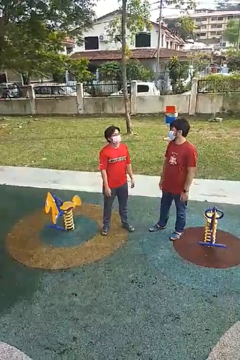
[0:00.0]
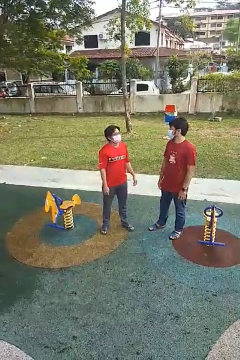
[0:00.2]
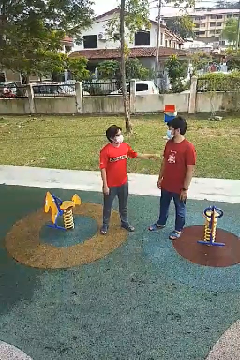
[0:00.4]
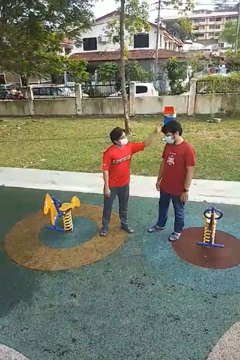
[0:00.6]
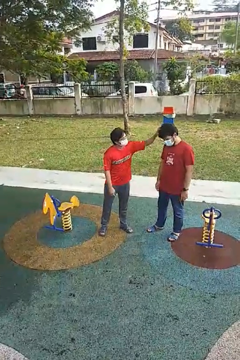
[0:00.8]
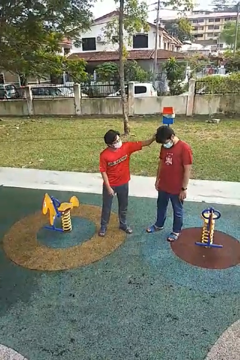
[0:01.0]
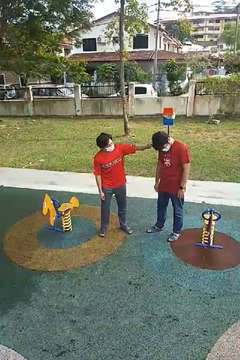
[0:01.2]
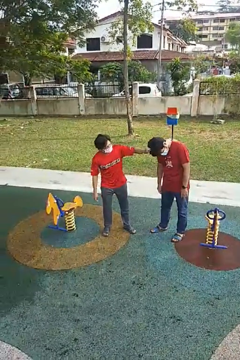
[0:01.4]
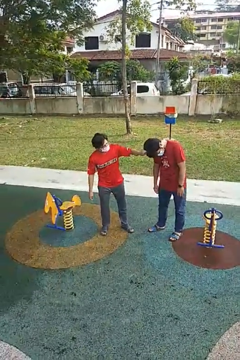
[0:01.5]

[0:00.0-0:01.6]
person grabs person by hair

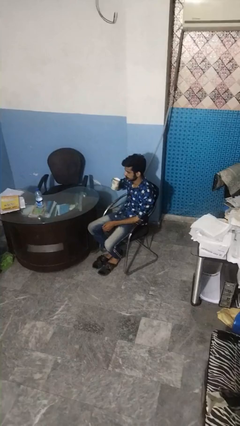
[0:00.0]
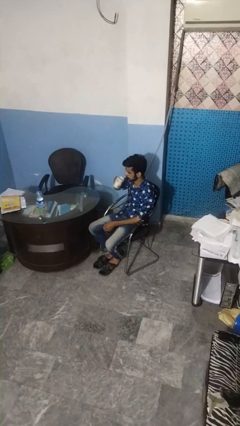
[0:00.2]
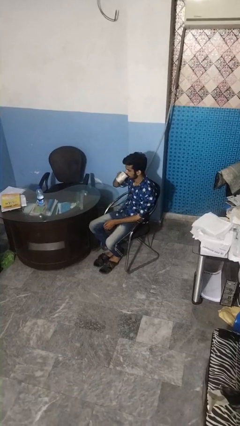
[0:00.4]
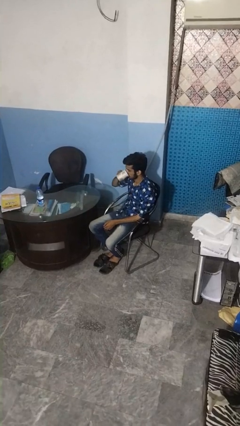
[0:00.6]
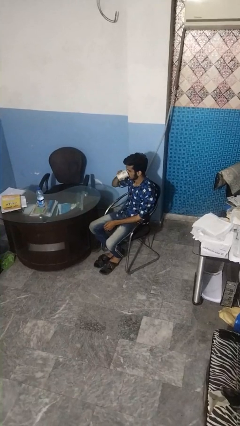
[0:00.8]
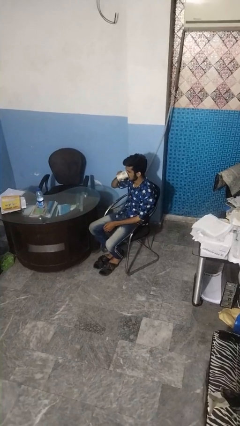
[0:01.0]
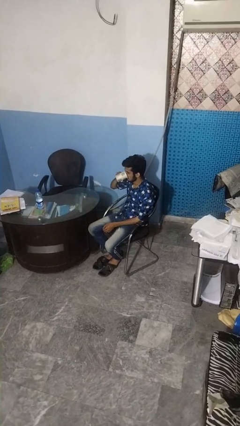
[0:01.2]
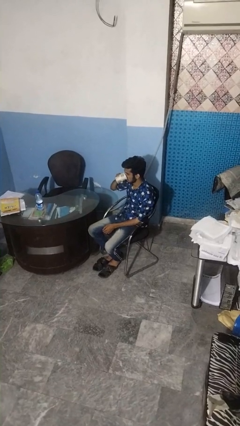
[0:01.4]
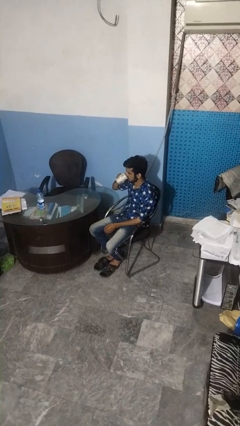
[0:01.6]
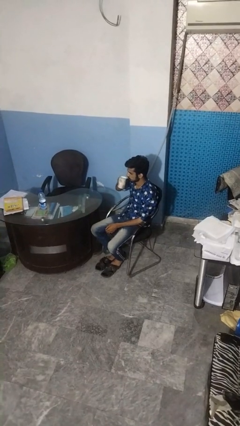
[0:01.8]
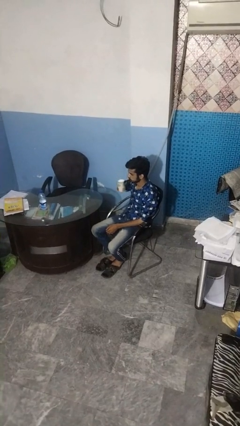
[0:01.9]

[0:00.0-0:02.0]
person drinks from mug

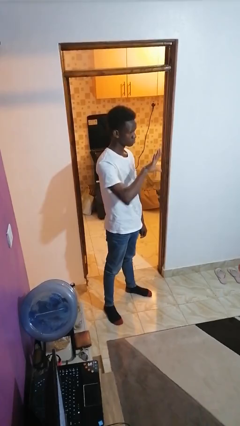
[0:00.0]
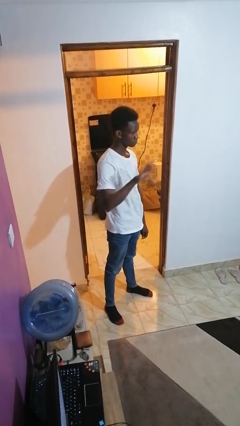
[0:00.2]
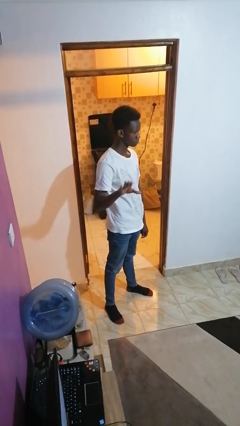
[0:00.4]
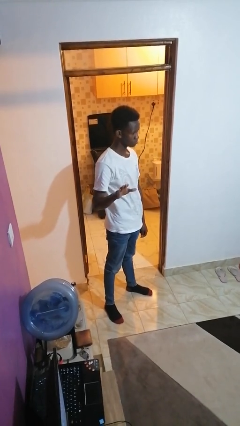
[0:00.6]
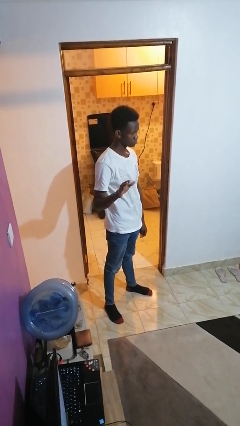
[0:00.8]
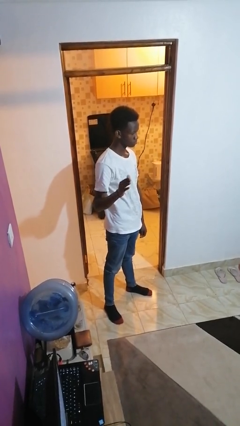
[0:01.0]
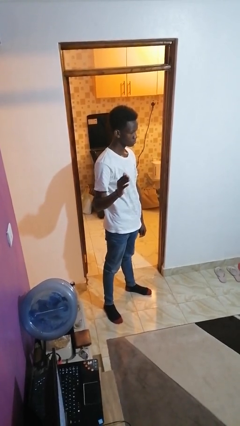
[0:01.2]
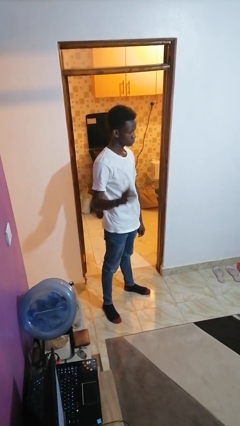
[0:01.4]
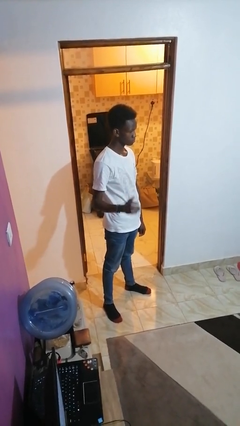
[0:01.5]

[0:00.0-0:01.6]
person gestures swipe right

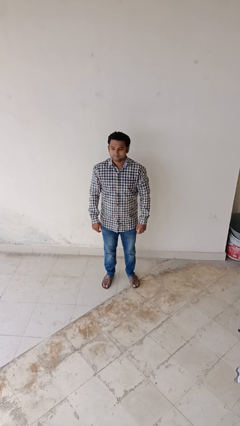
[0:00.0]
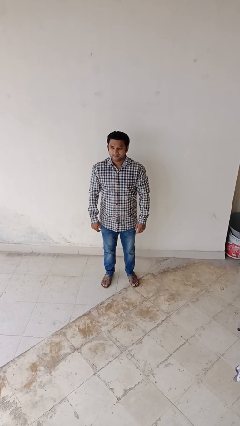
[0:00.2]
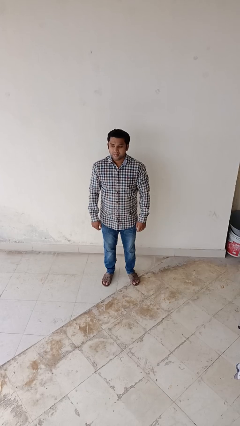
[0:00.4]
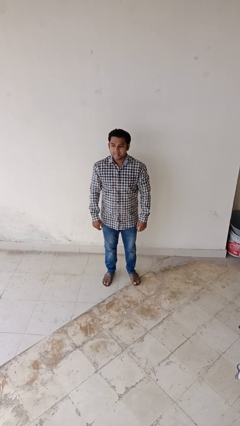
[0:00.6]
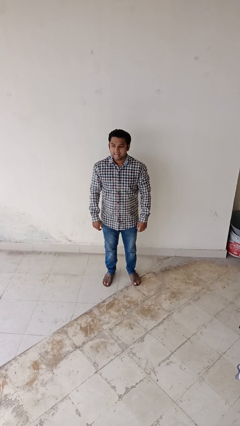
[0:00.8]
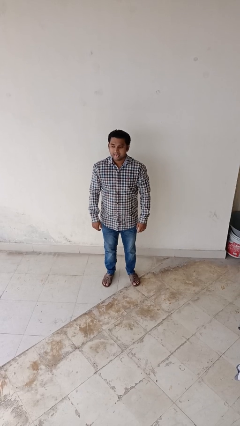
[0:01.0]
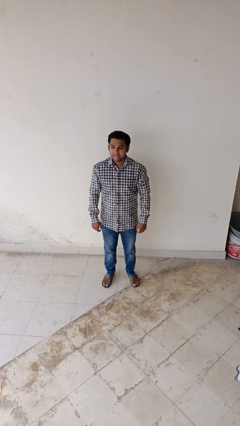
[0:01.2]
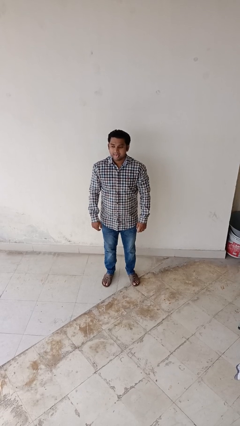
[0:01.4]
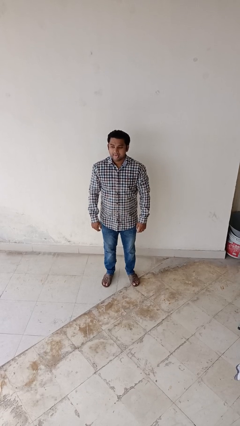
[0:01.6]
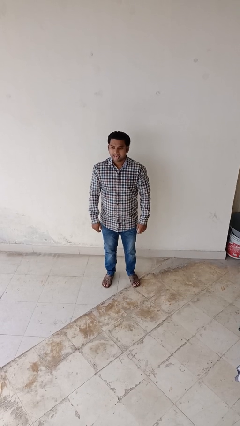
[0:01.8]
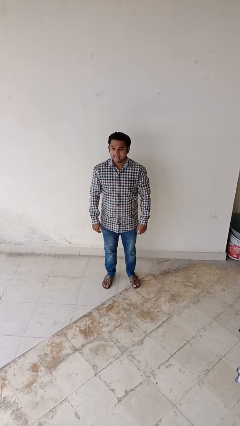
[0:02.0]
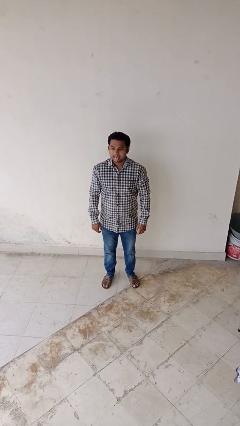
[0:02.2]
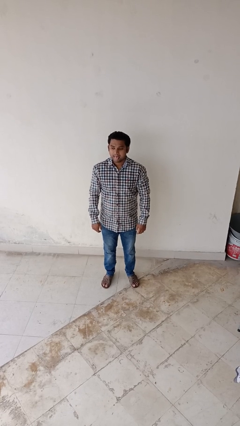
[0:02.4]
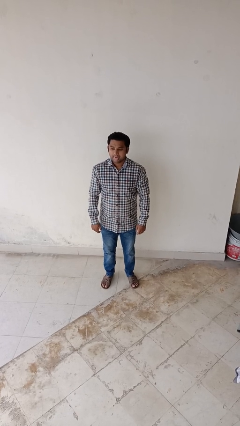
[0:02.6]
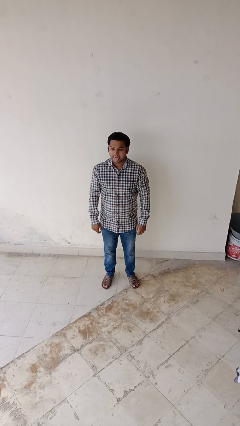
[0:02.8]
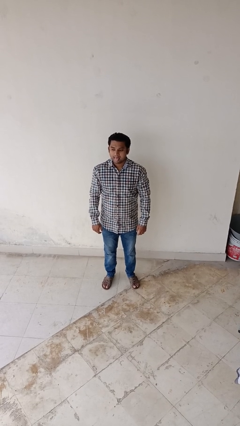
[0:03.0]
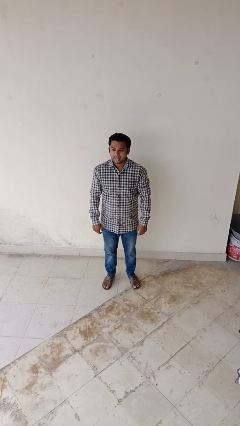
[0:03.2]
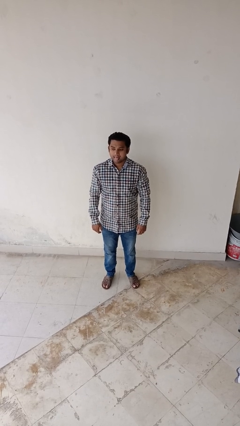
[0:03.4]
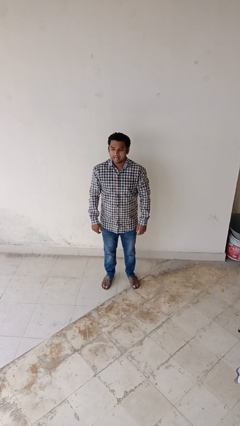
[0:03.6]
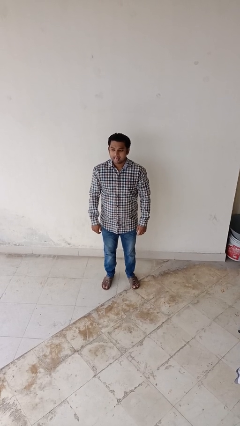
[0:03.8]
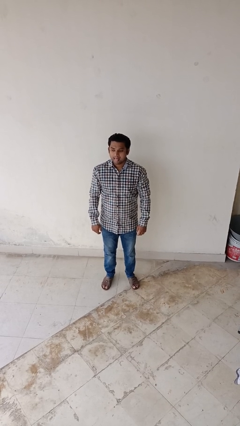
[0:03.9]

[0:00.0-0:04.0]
person sticks out tongue

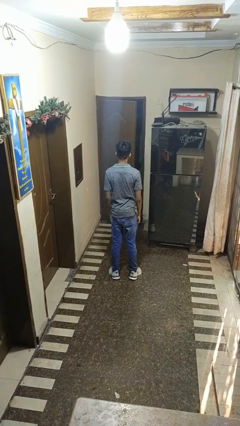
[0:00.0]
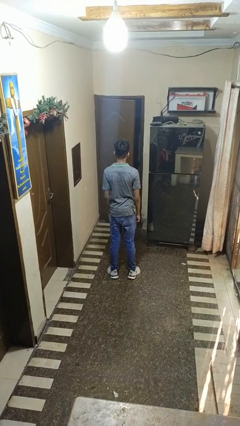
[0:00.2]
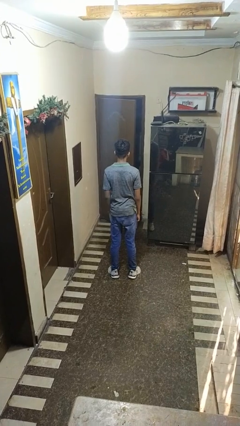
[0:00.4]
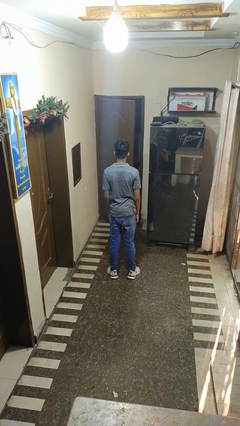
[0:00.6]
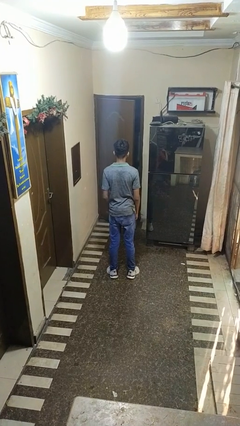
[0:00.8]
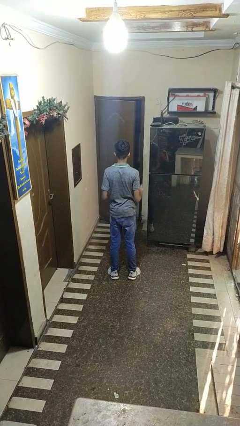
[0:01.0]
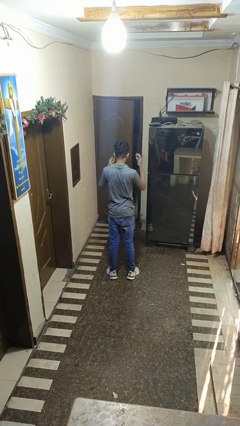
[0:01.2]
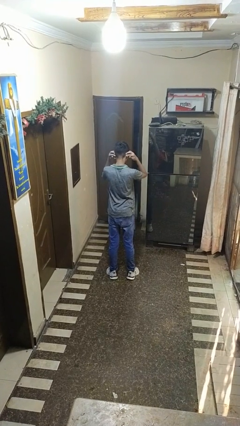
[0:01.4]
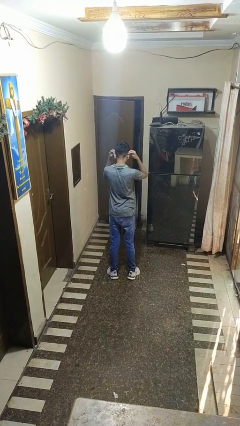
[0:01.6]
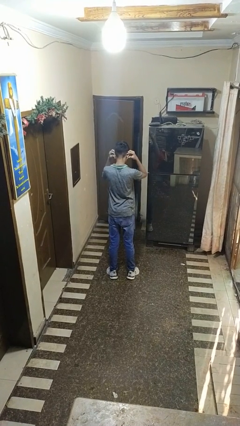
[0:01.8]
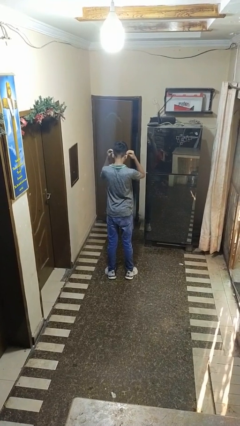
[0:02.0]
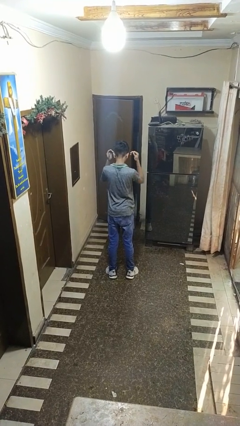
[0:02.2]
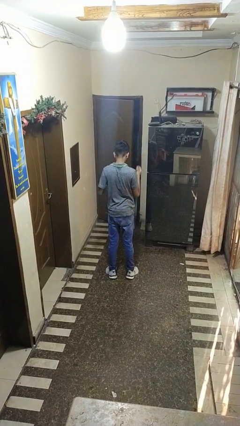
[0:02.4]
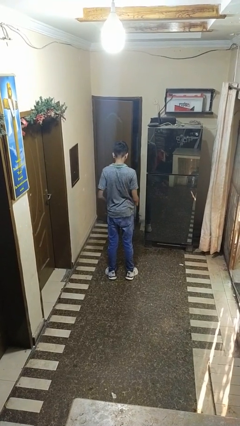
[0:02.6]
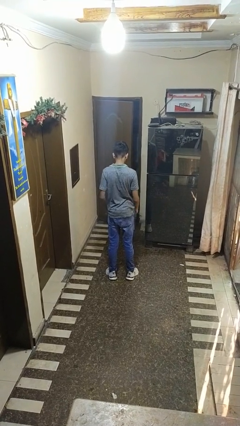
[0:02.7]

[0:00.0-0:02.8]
person touches earlobe

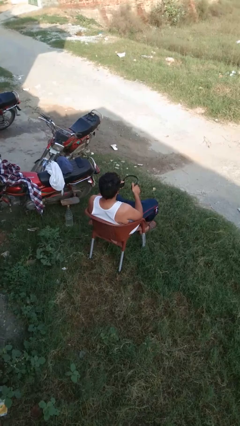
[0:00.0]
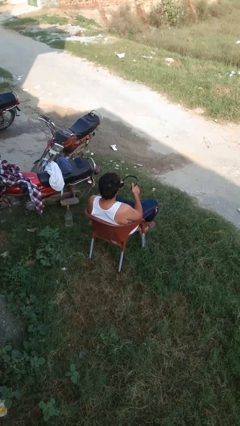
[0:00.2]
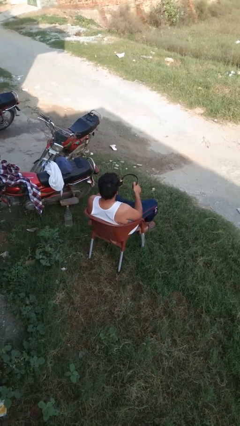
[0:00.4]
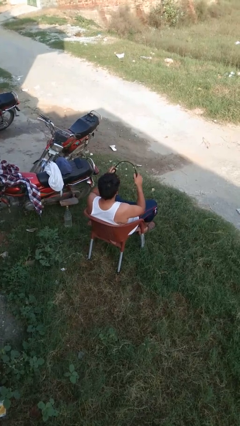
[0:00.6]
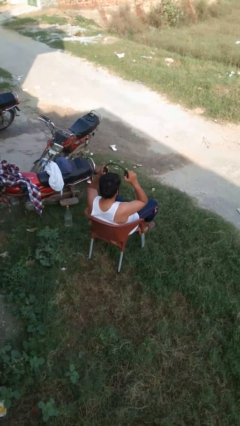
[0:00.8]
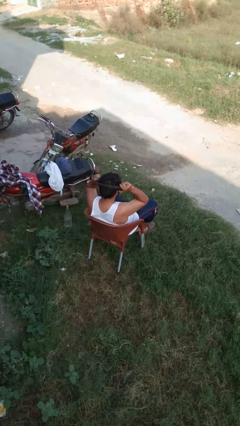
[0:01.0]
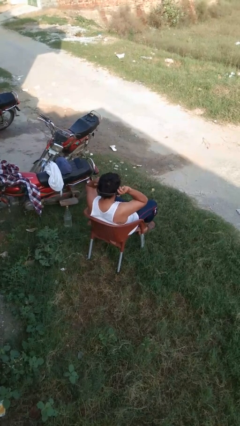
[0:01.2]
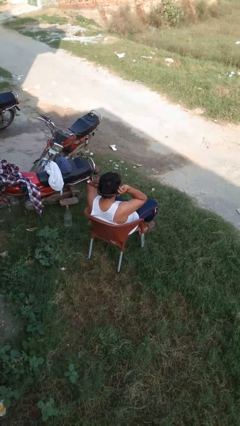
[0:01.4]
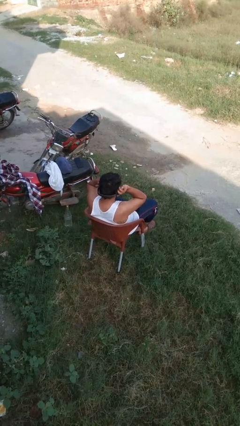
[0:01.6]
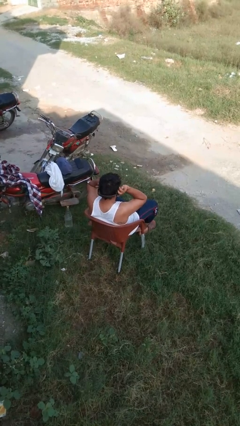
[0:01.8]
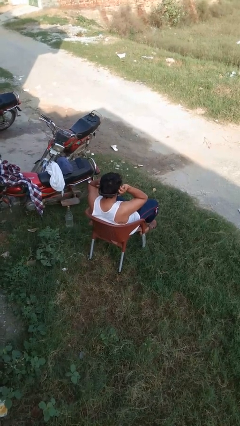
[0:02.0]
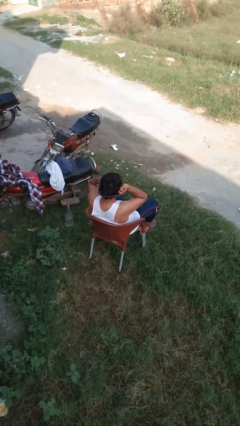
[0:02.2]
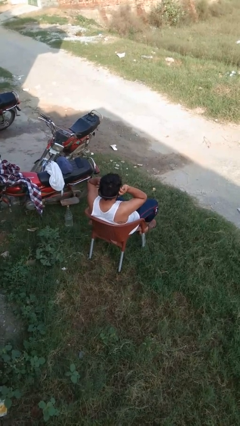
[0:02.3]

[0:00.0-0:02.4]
person puts on headphones

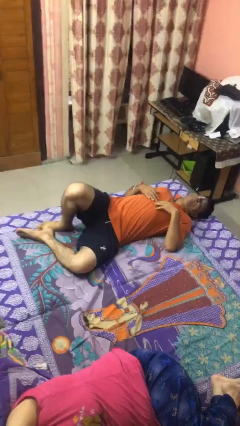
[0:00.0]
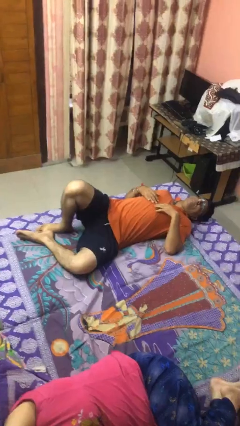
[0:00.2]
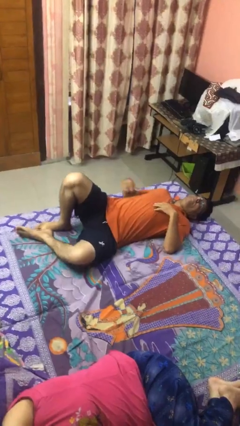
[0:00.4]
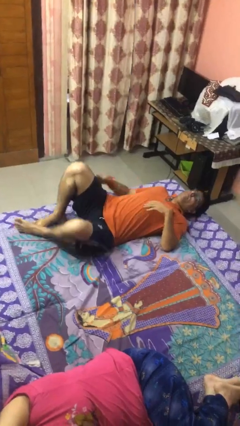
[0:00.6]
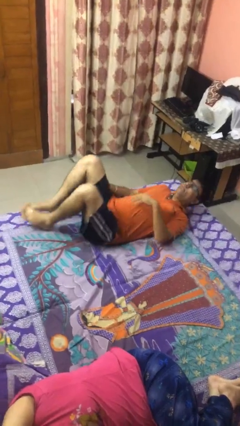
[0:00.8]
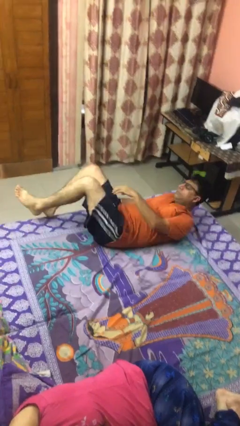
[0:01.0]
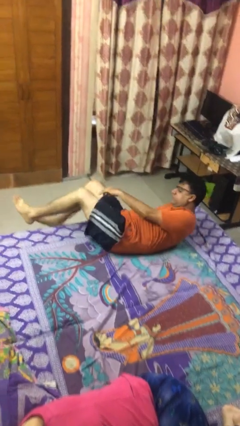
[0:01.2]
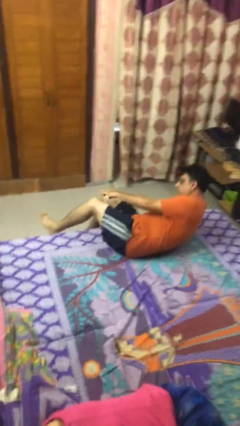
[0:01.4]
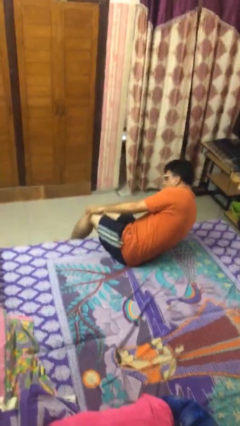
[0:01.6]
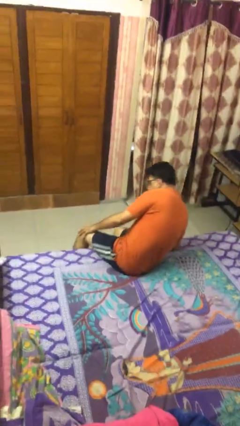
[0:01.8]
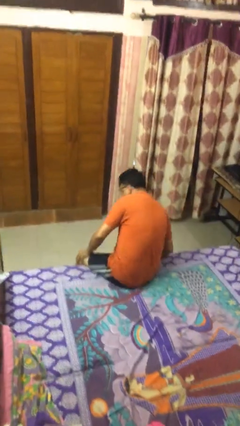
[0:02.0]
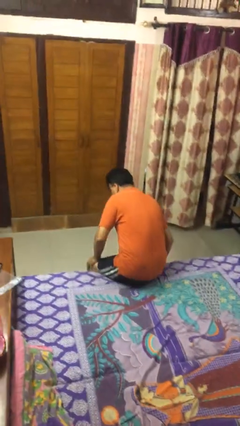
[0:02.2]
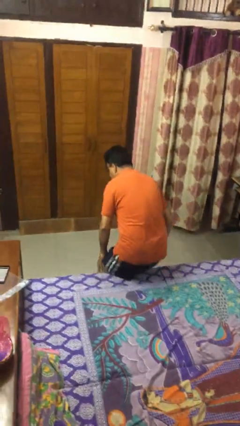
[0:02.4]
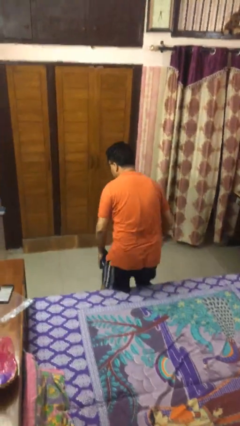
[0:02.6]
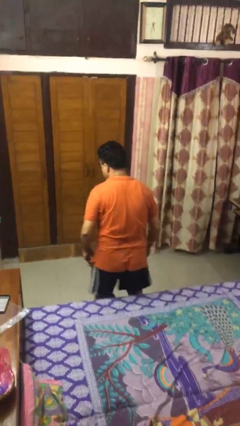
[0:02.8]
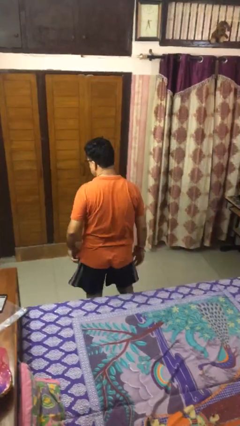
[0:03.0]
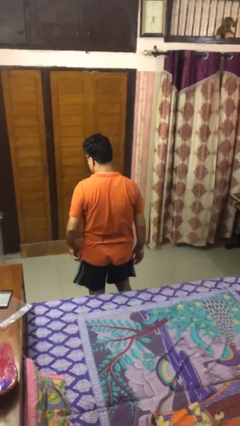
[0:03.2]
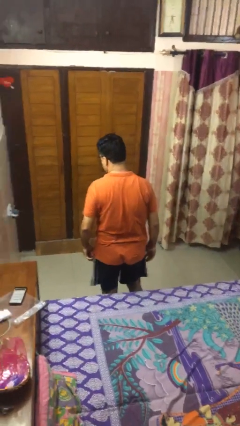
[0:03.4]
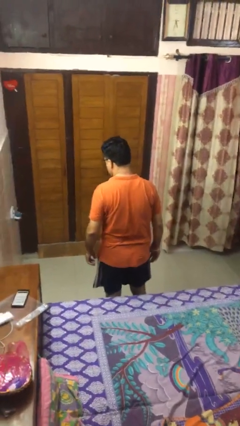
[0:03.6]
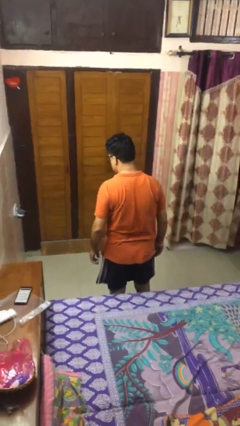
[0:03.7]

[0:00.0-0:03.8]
person stands up
